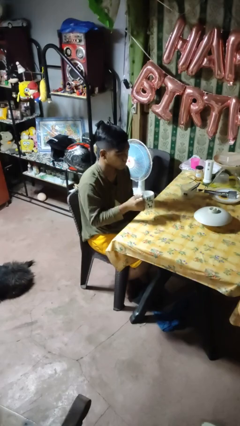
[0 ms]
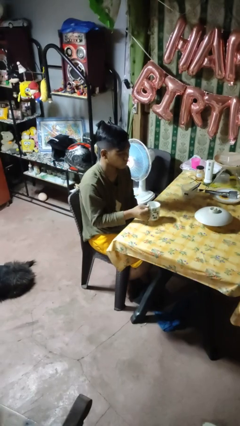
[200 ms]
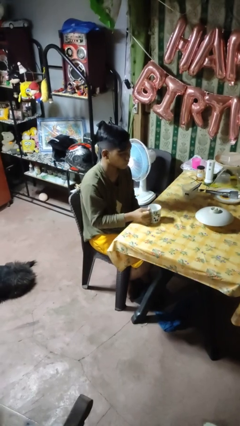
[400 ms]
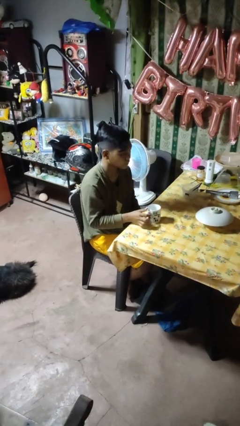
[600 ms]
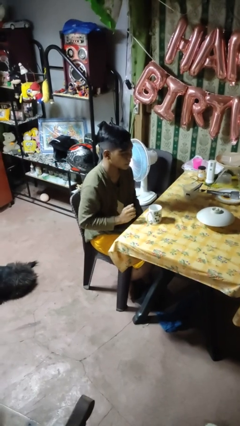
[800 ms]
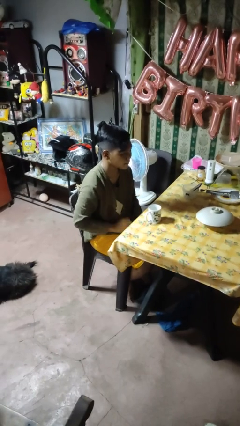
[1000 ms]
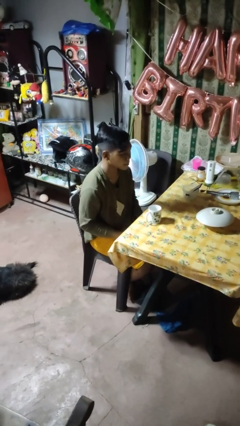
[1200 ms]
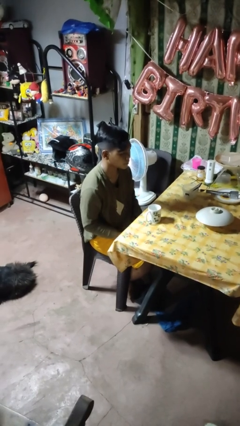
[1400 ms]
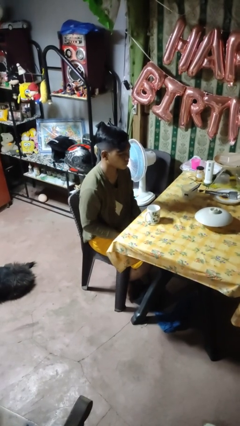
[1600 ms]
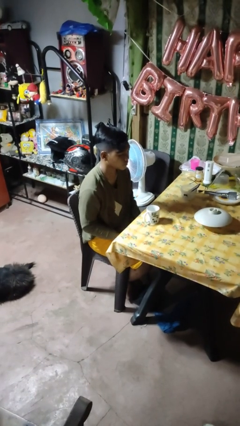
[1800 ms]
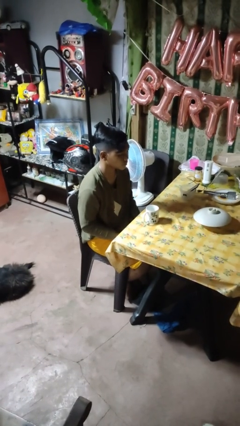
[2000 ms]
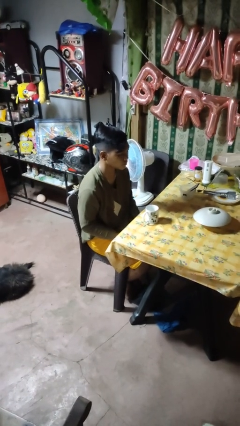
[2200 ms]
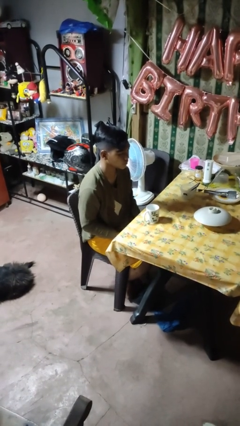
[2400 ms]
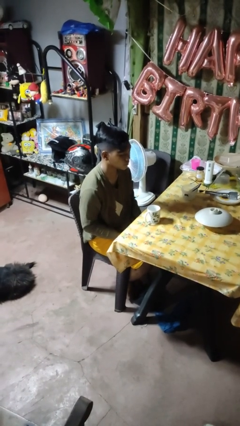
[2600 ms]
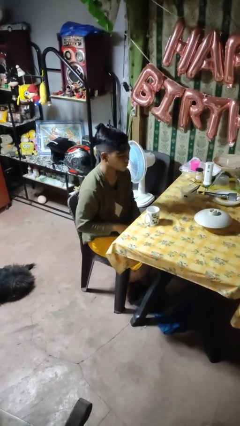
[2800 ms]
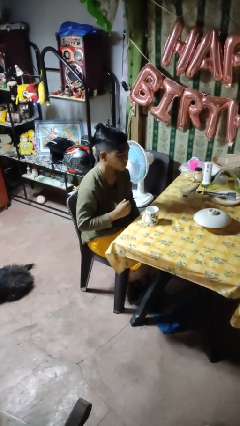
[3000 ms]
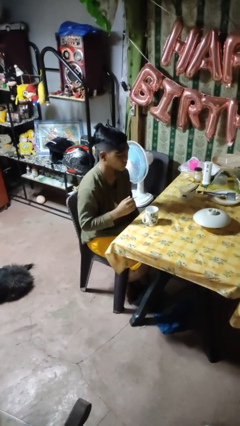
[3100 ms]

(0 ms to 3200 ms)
person puts down object on table

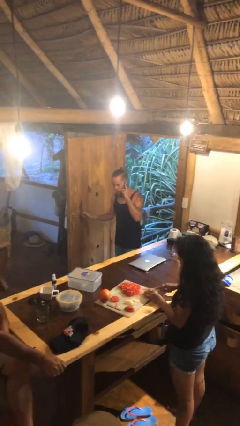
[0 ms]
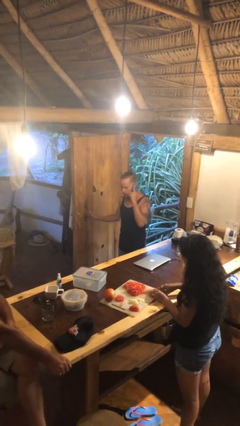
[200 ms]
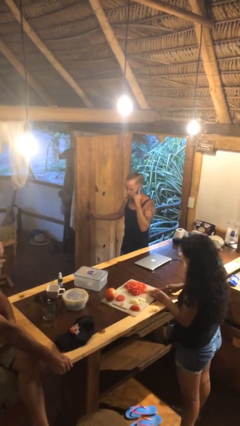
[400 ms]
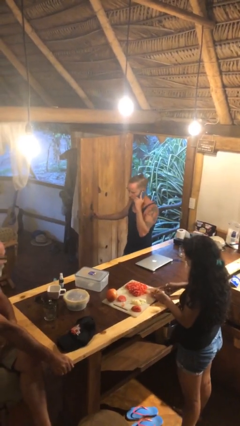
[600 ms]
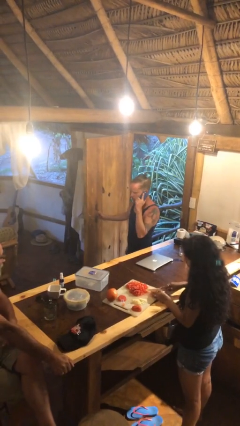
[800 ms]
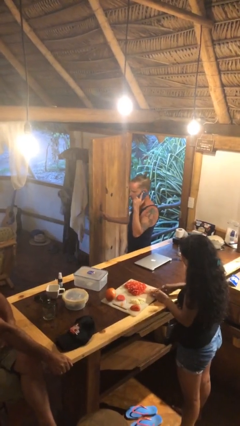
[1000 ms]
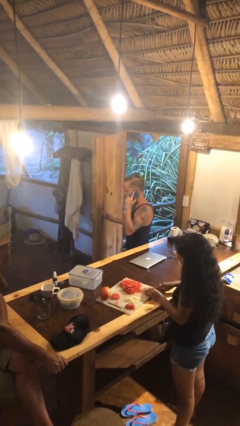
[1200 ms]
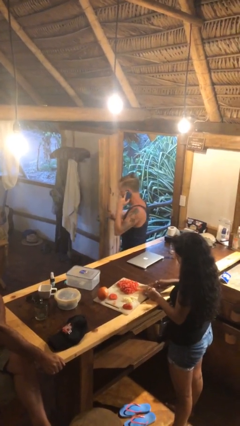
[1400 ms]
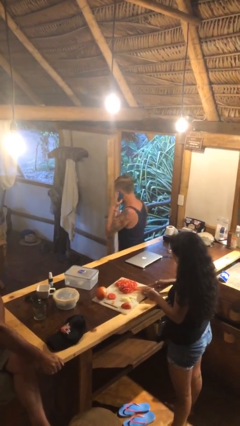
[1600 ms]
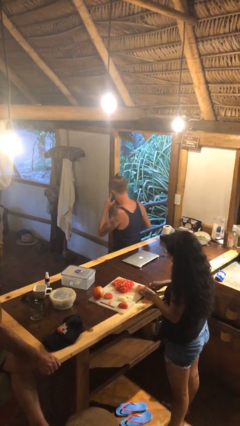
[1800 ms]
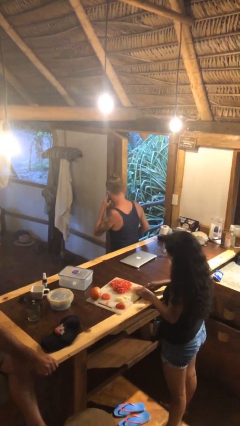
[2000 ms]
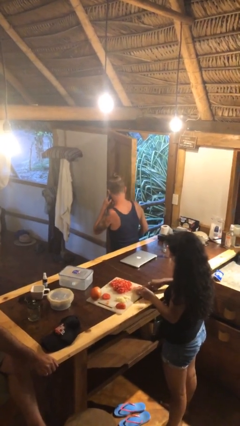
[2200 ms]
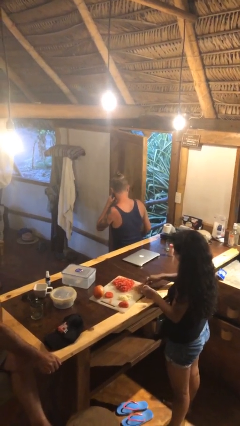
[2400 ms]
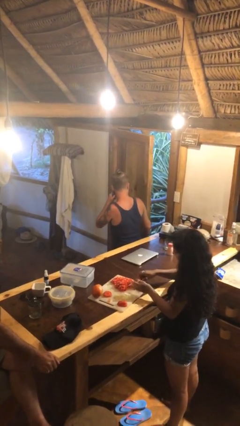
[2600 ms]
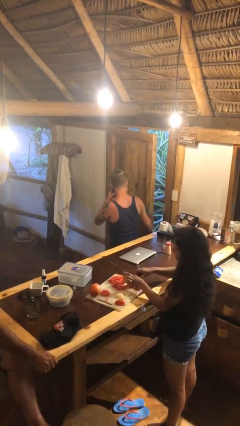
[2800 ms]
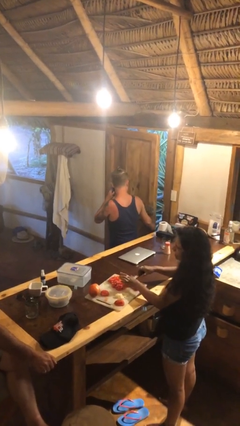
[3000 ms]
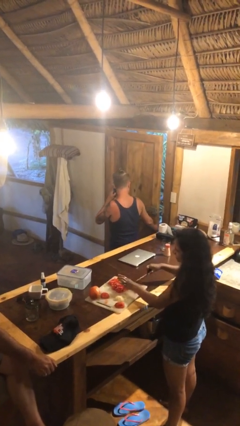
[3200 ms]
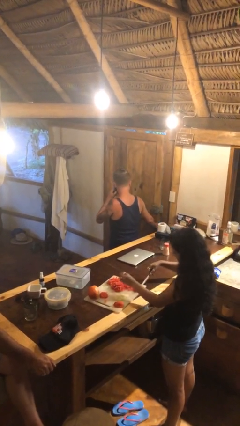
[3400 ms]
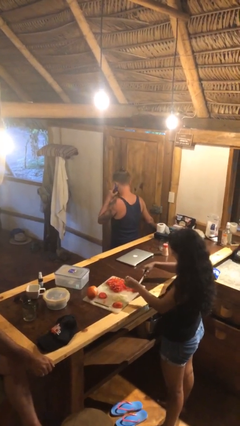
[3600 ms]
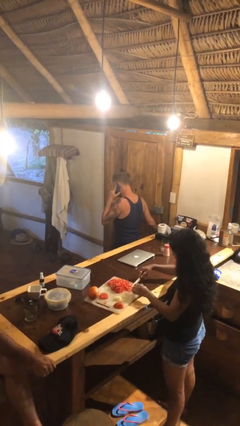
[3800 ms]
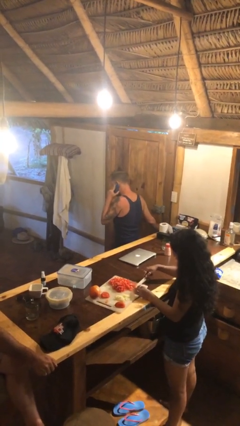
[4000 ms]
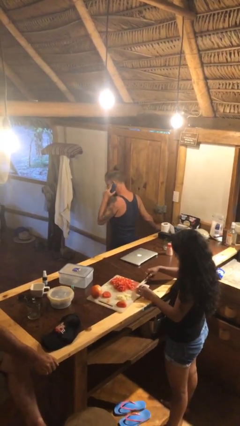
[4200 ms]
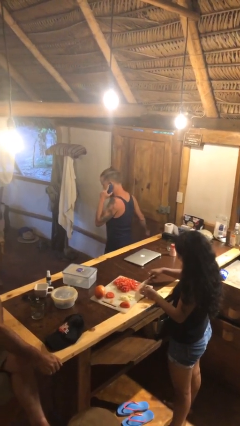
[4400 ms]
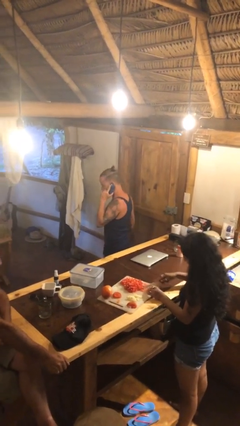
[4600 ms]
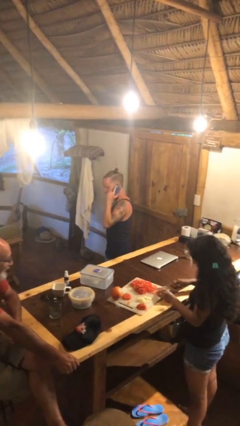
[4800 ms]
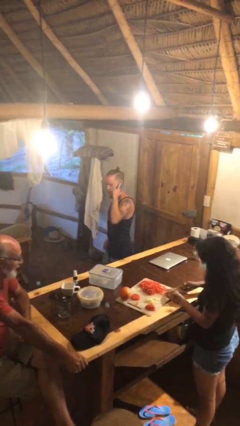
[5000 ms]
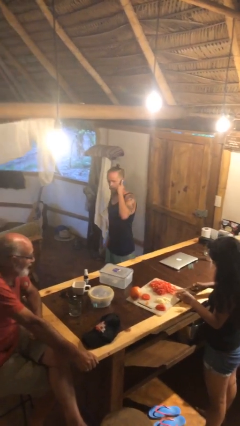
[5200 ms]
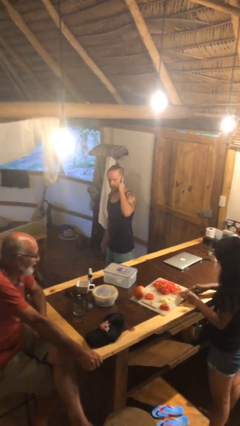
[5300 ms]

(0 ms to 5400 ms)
person closes facility door

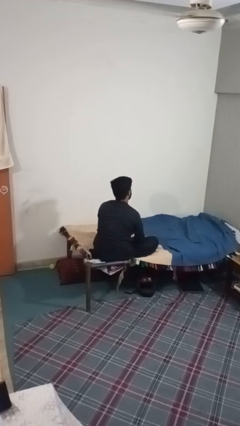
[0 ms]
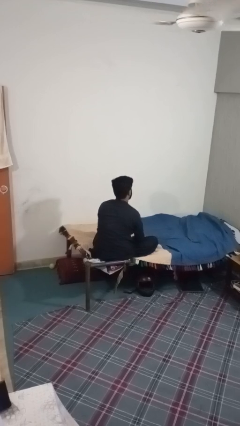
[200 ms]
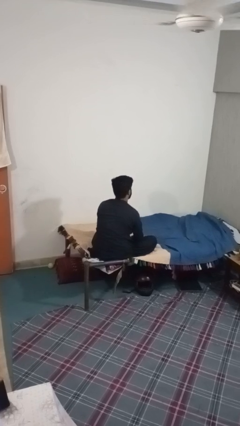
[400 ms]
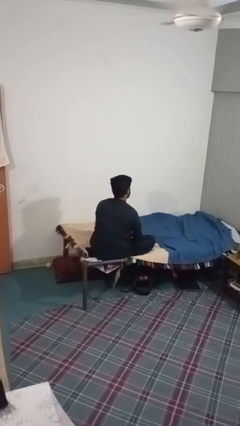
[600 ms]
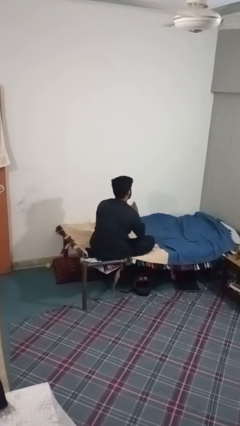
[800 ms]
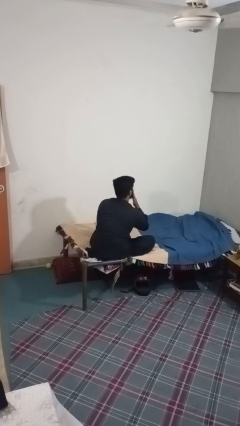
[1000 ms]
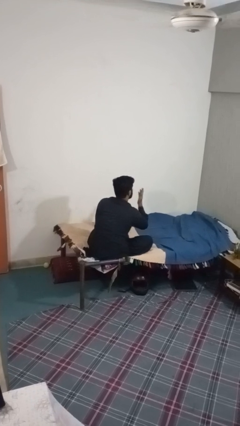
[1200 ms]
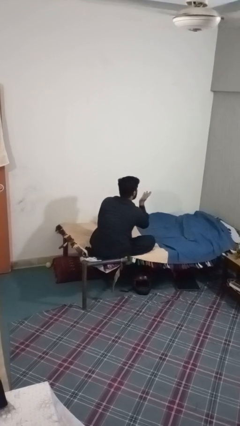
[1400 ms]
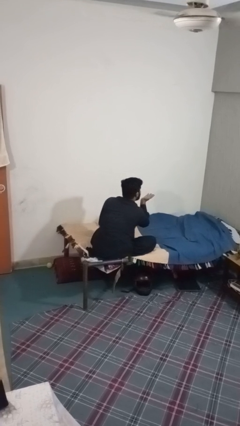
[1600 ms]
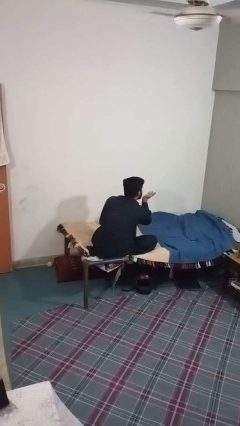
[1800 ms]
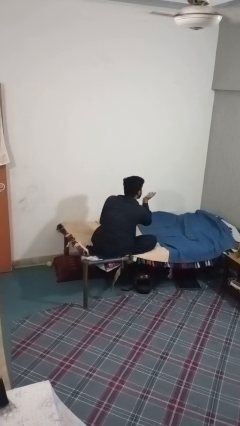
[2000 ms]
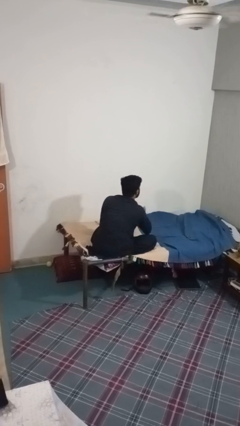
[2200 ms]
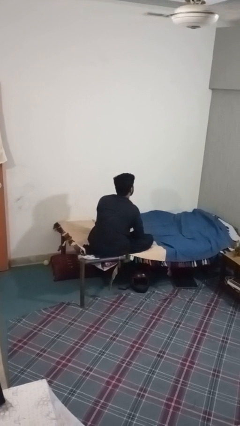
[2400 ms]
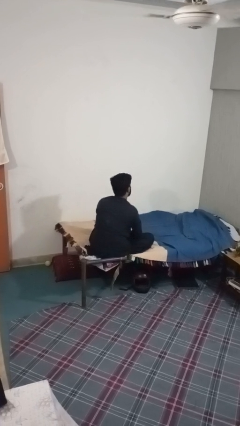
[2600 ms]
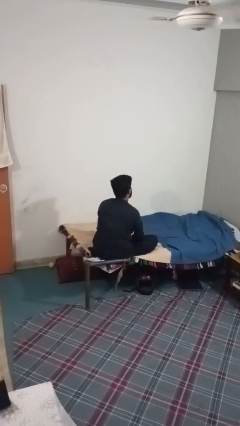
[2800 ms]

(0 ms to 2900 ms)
person gestures blow kiss

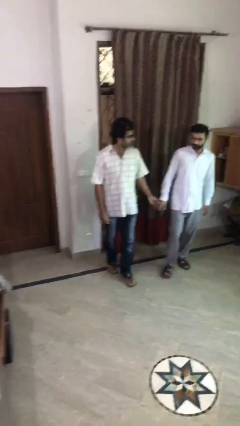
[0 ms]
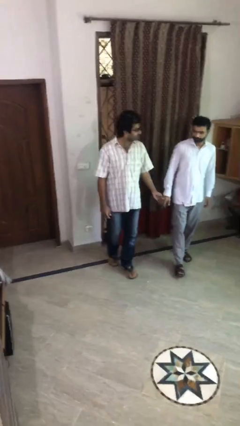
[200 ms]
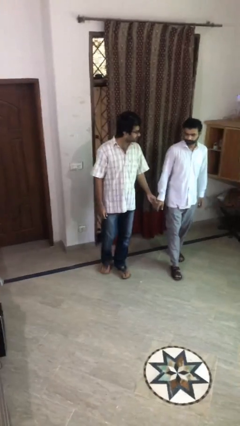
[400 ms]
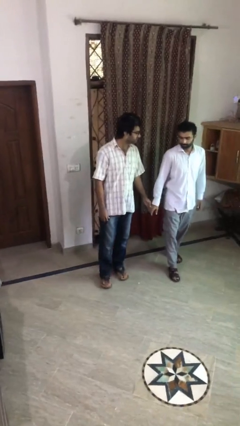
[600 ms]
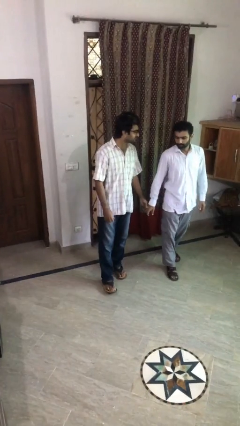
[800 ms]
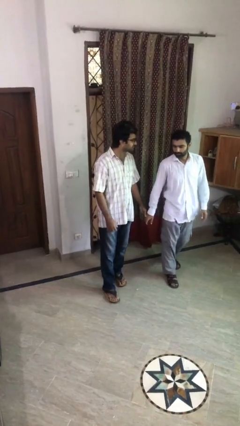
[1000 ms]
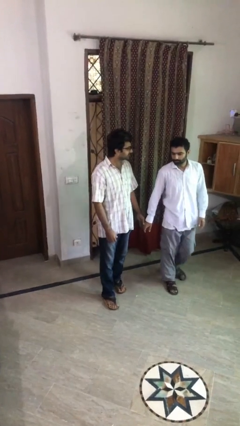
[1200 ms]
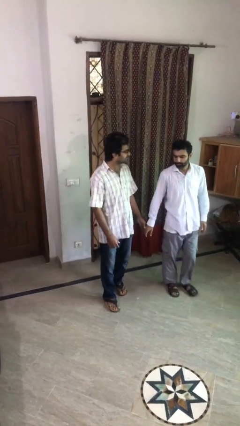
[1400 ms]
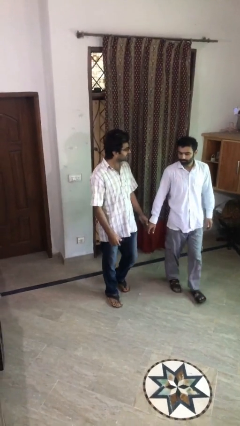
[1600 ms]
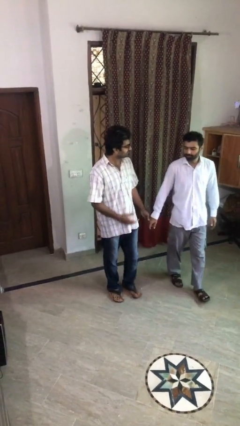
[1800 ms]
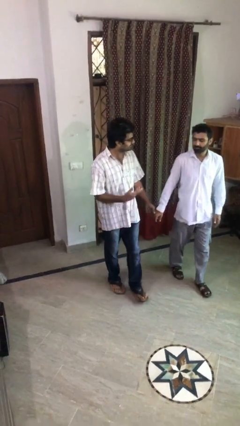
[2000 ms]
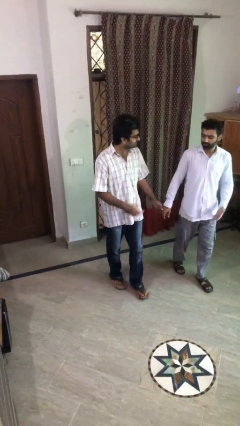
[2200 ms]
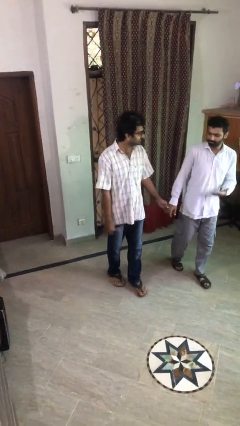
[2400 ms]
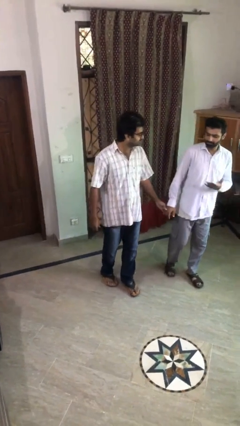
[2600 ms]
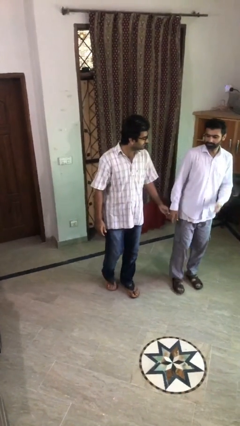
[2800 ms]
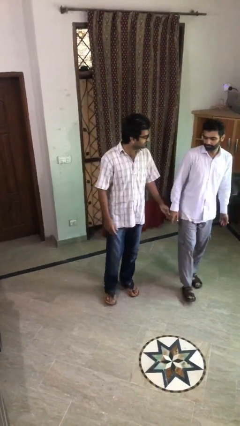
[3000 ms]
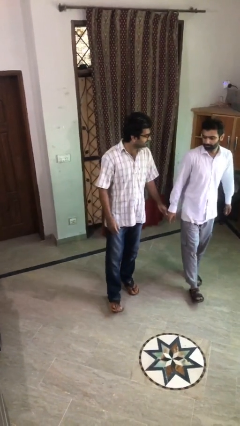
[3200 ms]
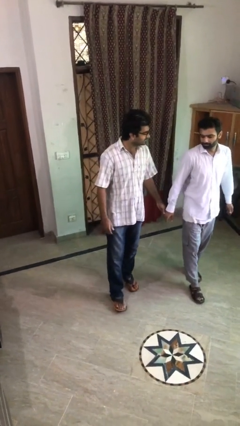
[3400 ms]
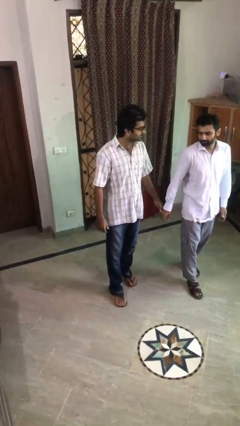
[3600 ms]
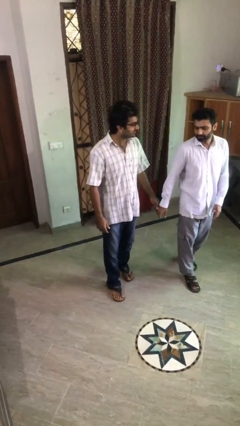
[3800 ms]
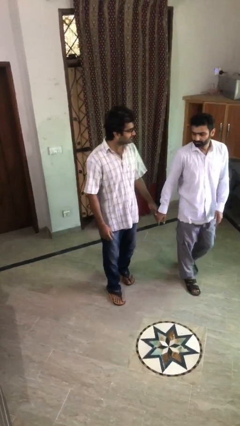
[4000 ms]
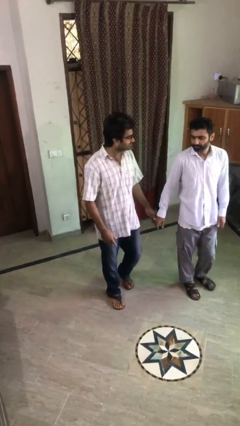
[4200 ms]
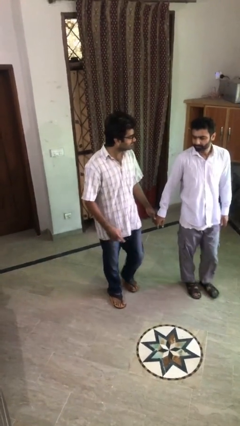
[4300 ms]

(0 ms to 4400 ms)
person holds hand

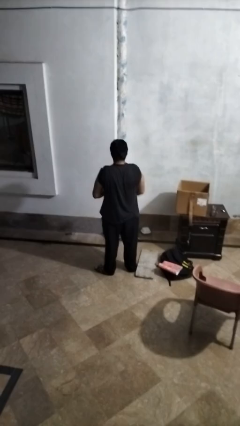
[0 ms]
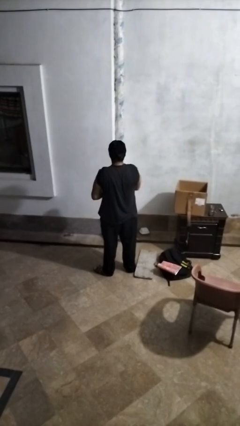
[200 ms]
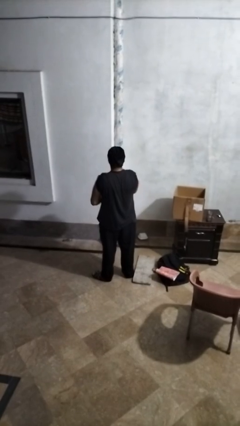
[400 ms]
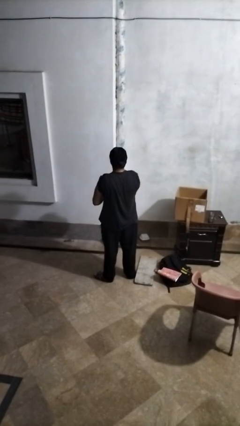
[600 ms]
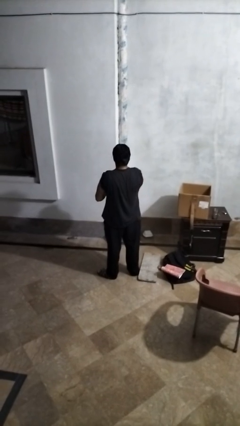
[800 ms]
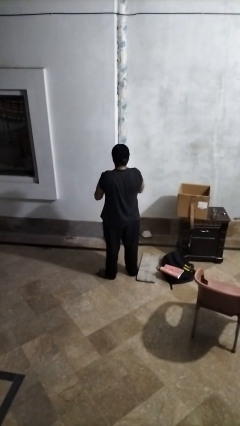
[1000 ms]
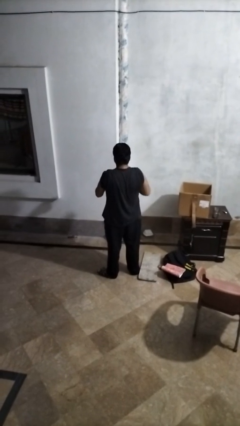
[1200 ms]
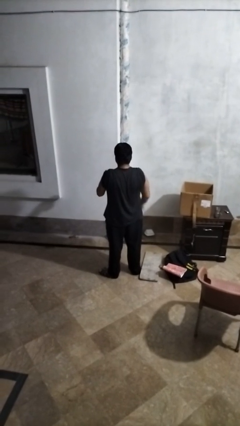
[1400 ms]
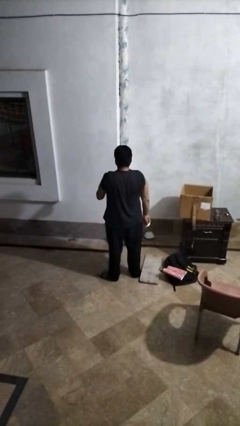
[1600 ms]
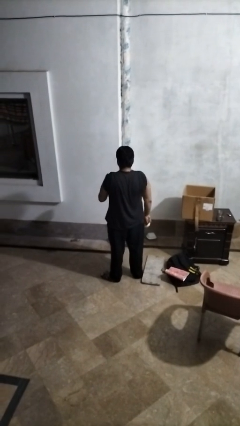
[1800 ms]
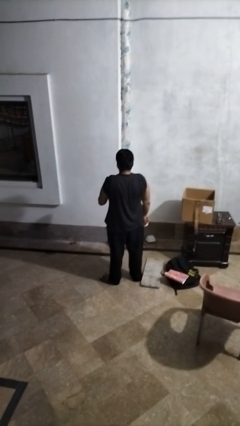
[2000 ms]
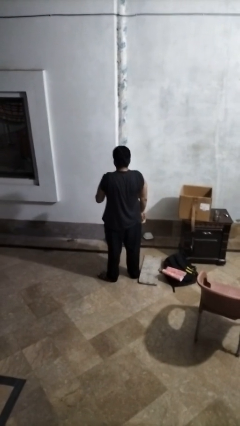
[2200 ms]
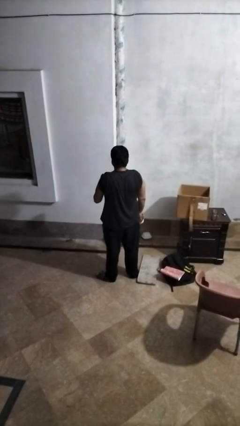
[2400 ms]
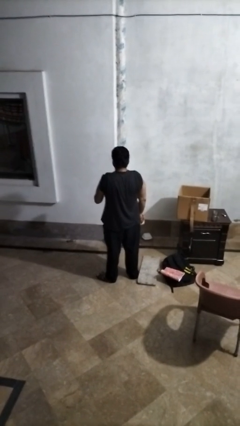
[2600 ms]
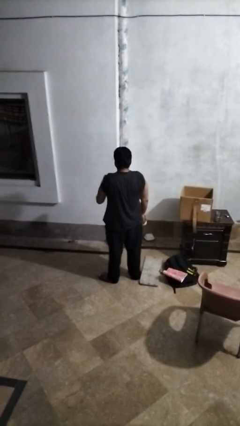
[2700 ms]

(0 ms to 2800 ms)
person opens beverage can
